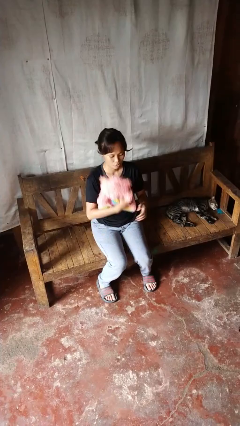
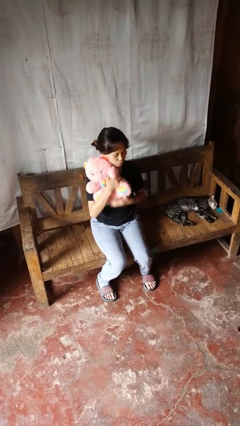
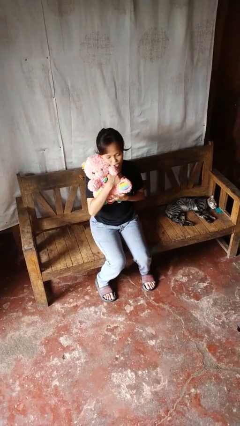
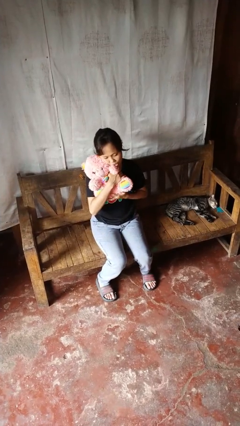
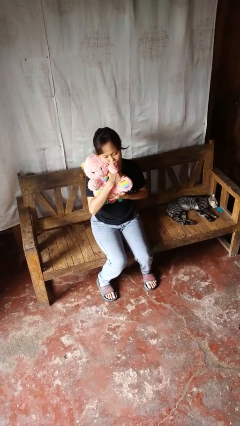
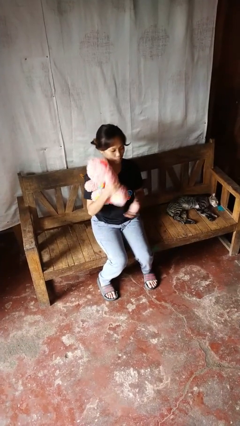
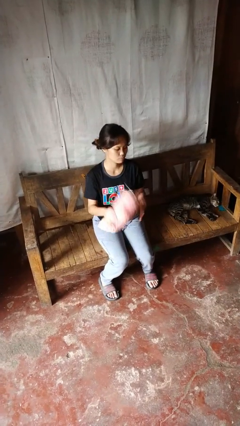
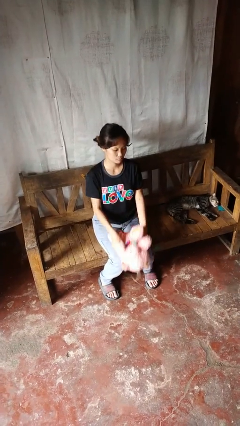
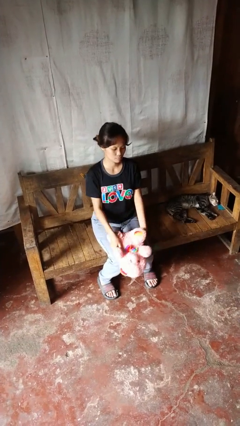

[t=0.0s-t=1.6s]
person hugs stuffed animal

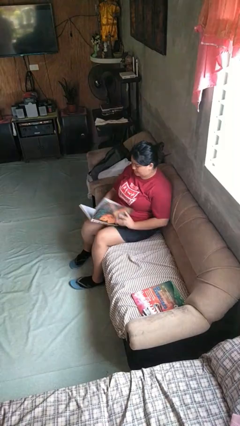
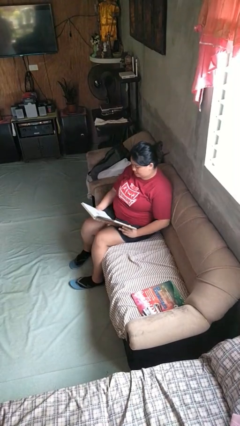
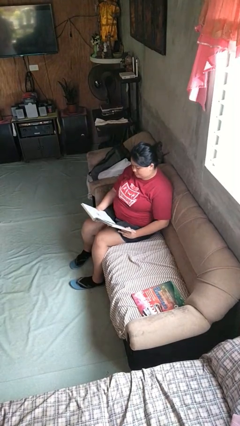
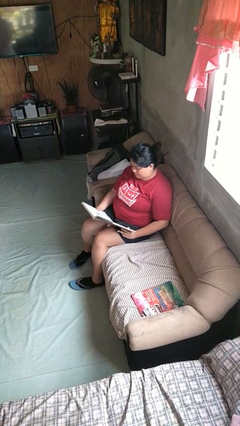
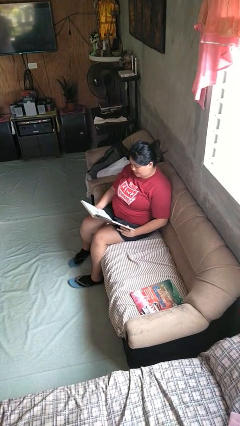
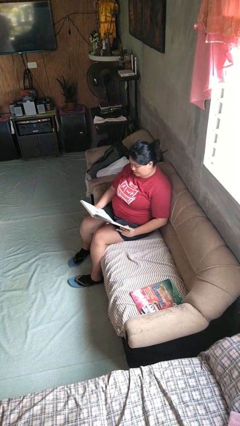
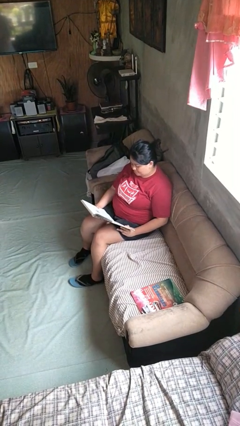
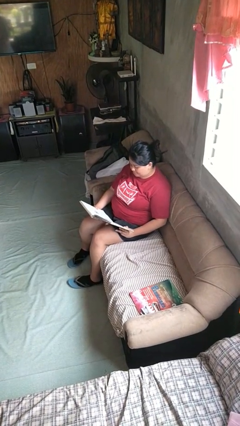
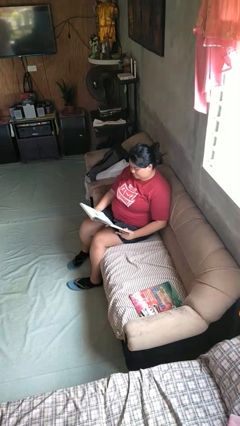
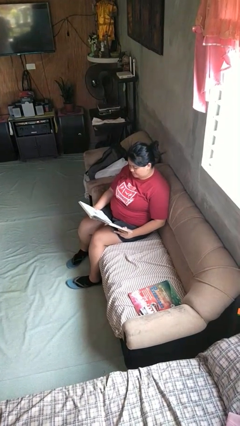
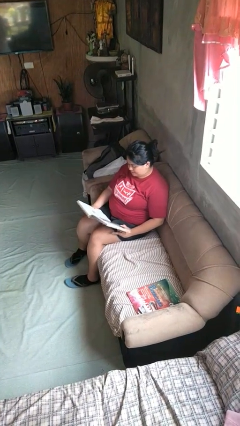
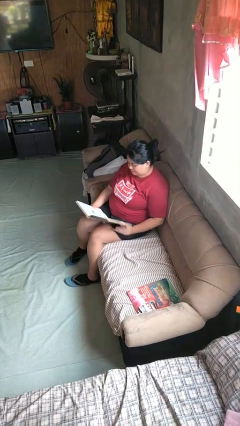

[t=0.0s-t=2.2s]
person reads book

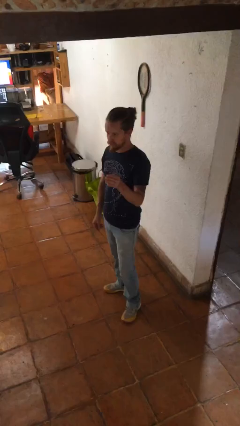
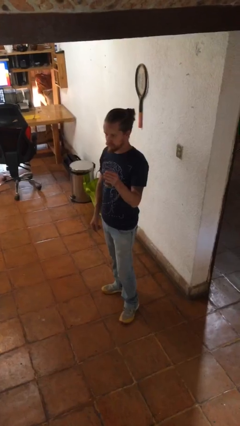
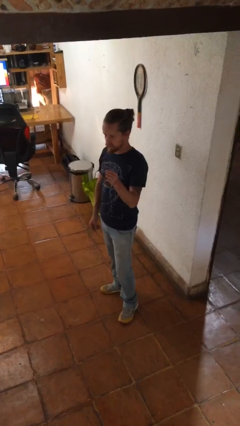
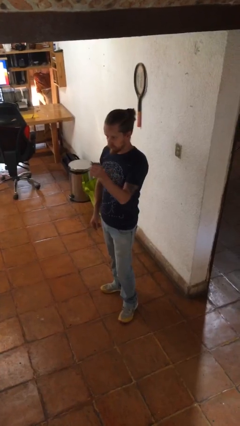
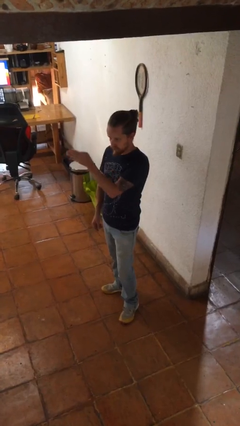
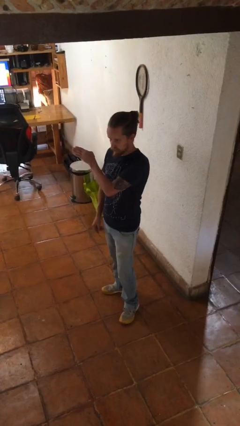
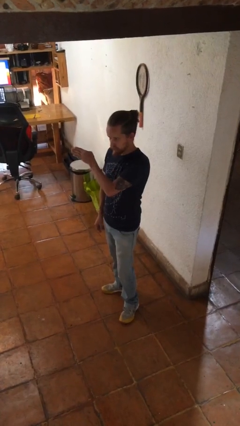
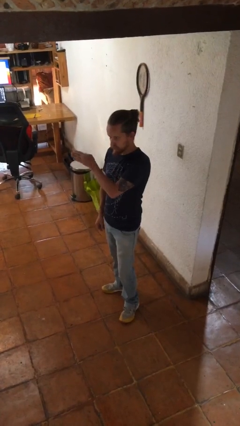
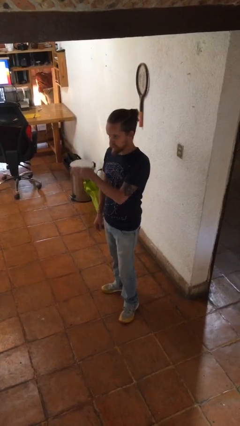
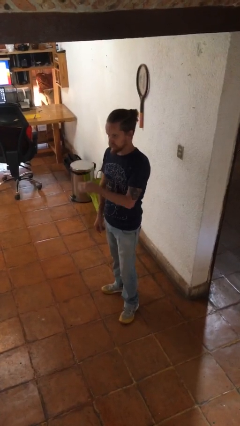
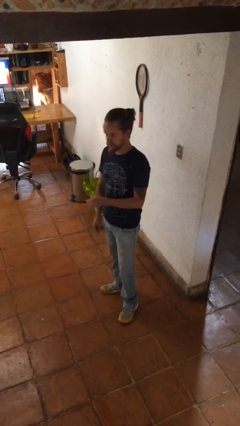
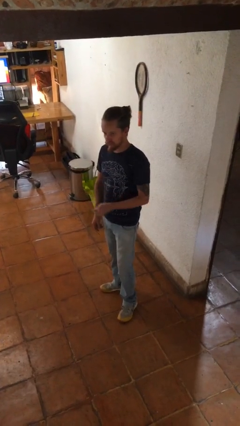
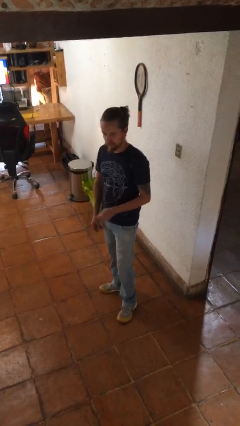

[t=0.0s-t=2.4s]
person gestures swipe right

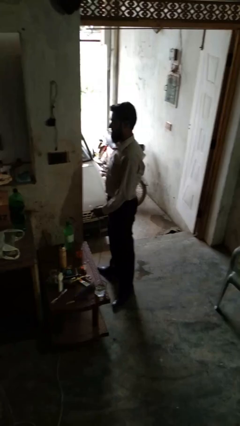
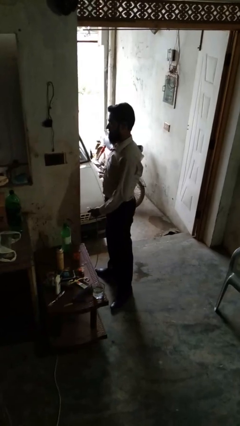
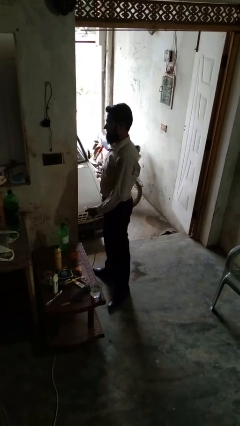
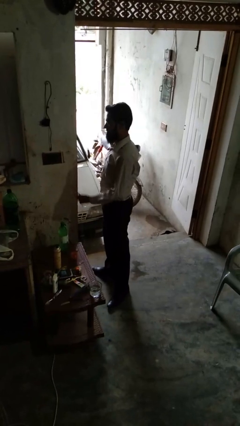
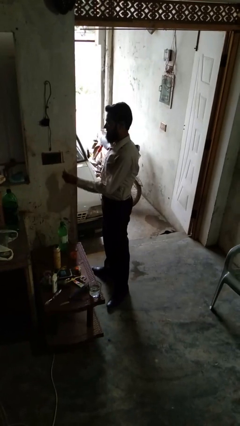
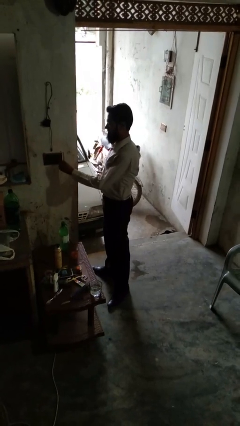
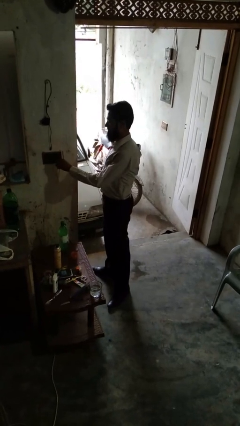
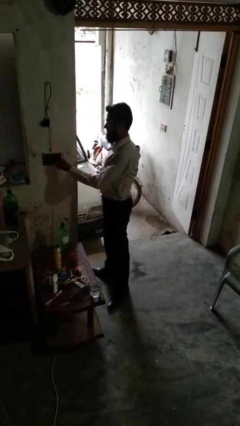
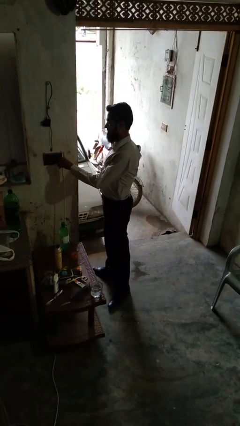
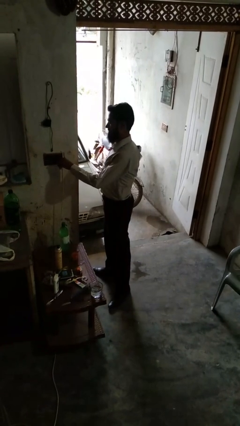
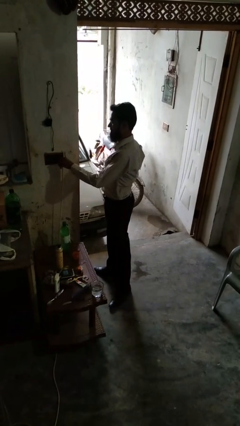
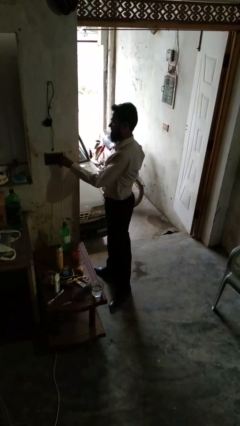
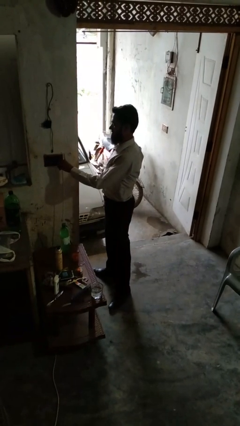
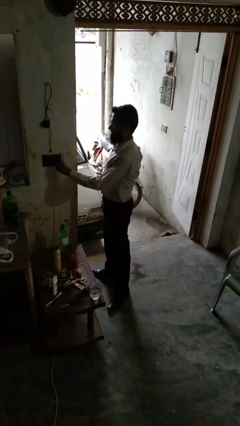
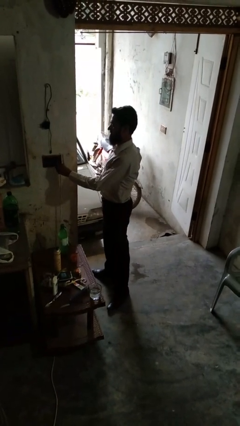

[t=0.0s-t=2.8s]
person plugs into electrical socket

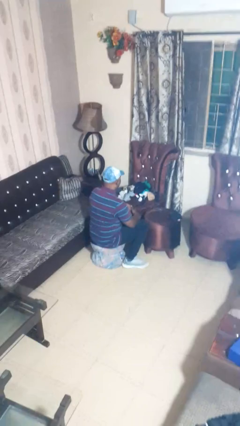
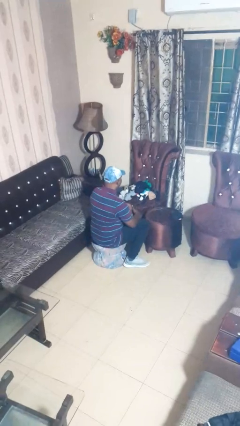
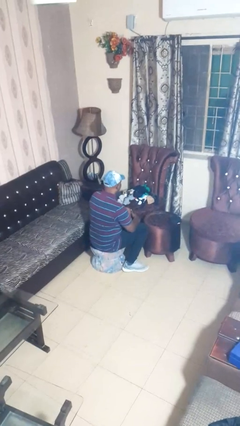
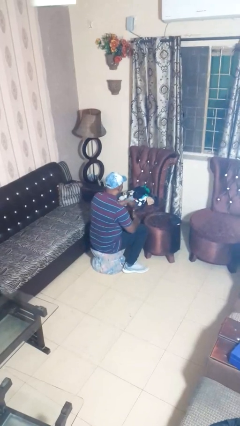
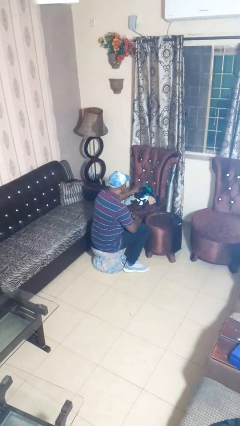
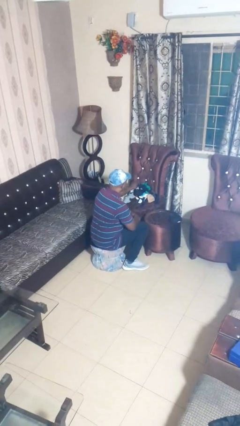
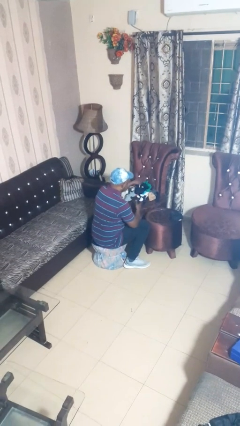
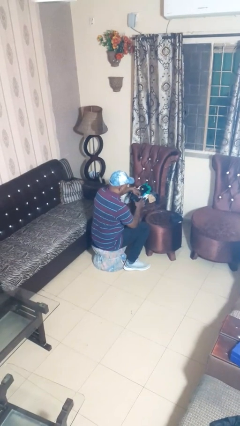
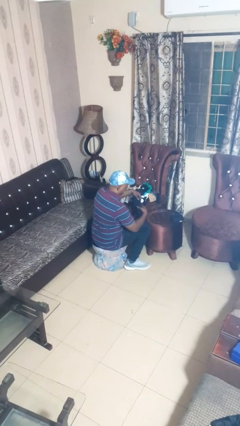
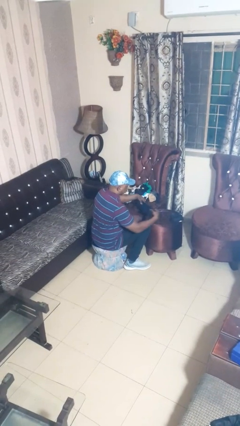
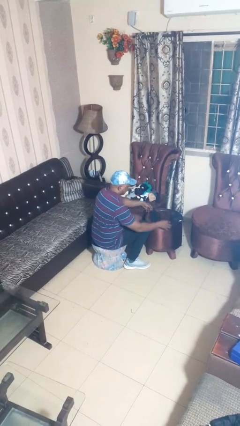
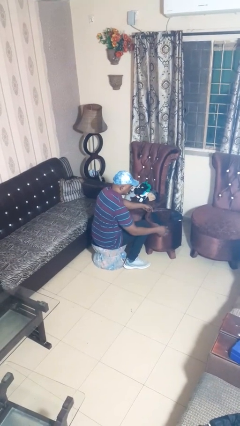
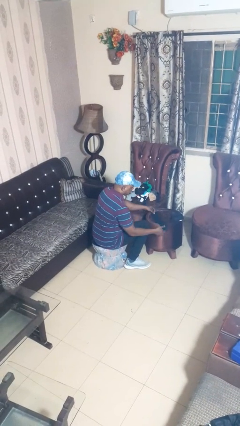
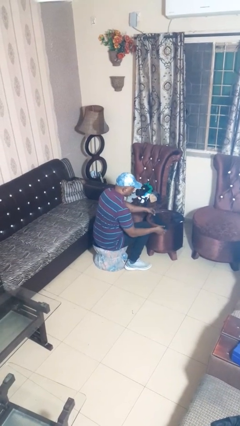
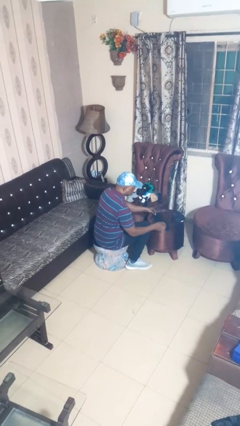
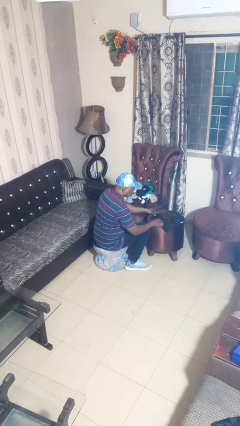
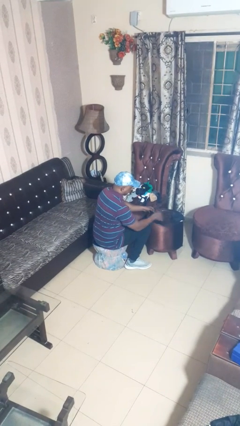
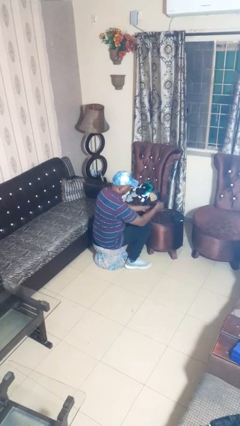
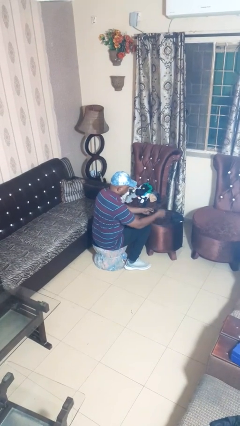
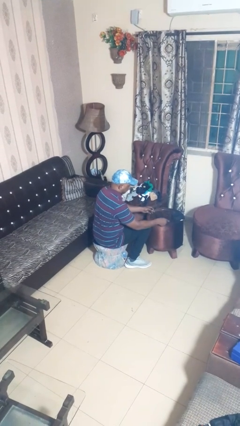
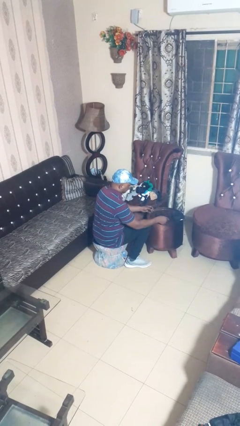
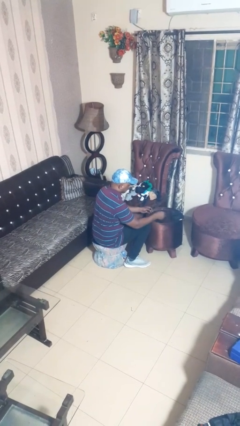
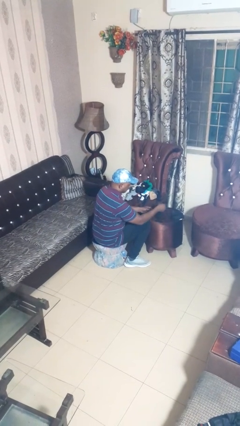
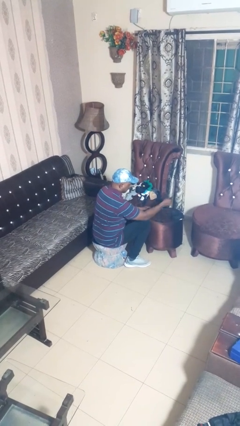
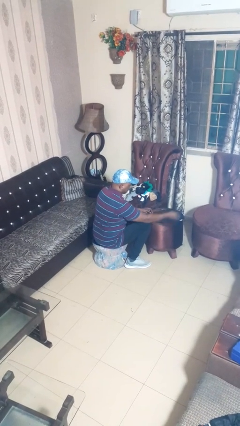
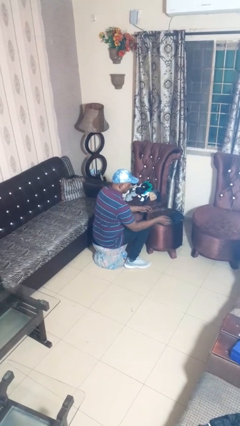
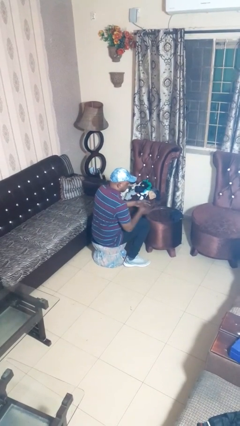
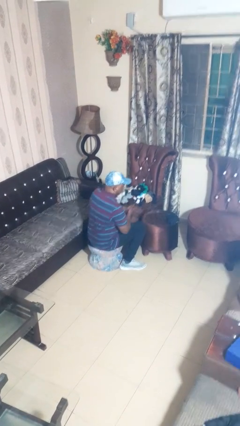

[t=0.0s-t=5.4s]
person folds socks

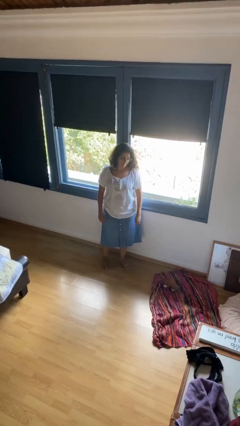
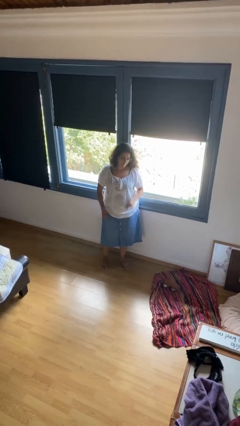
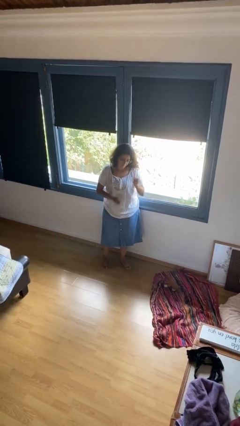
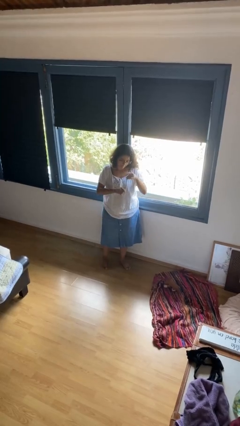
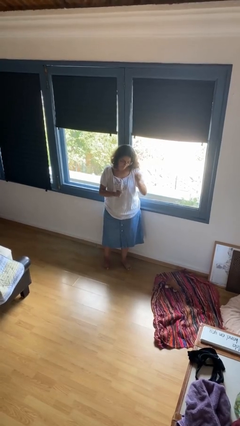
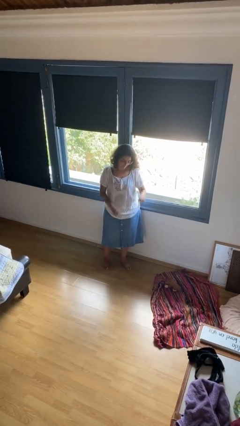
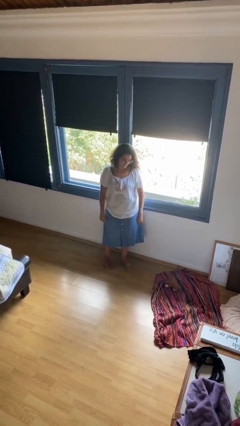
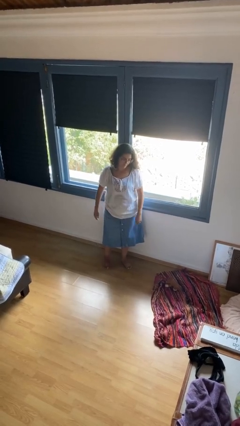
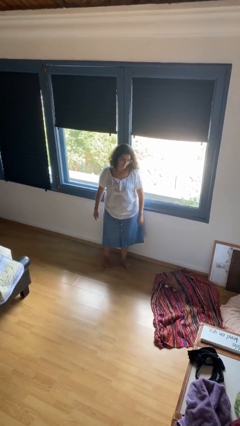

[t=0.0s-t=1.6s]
person snaps fingers

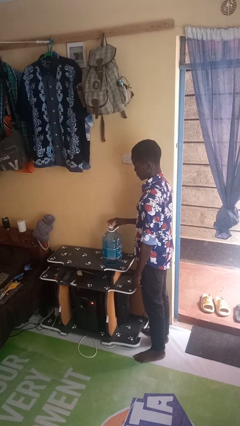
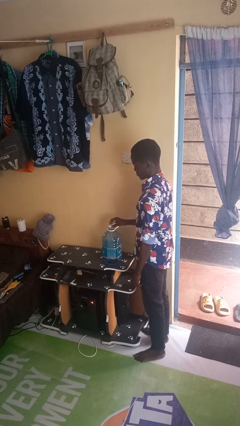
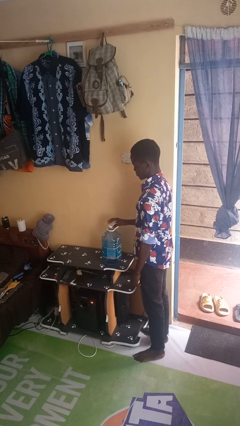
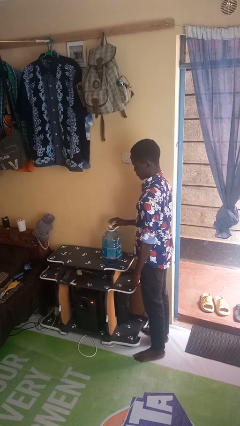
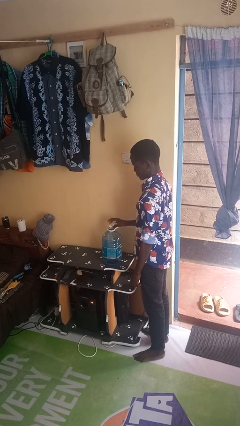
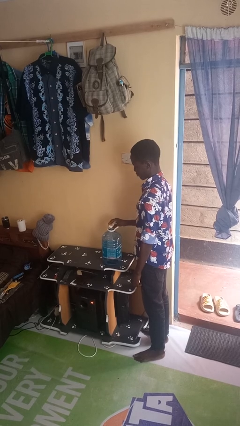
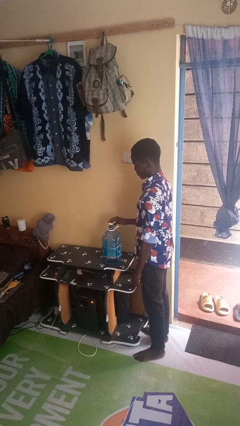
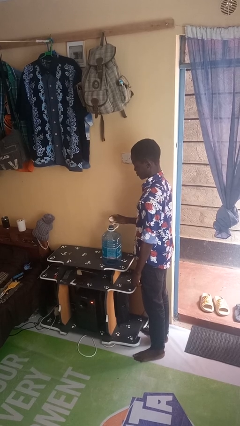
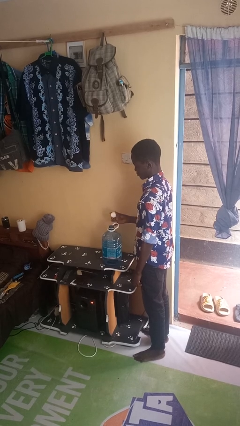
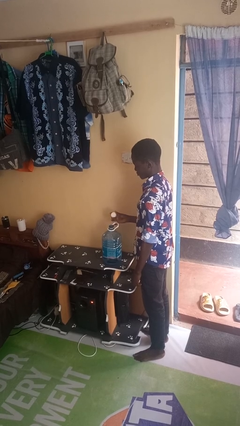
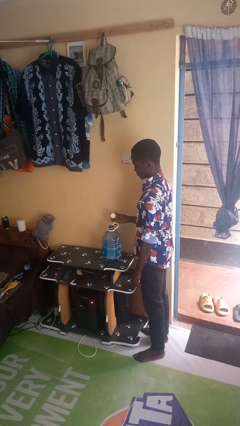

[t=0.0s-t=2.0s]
person unscrews lid from bottle
